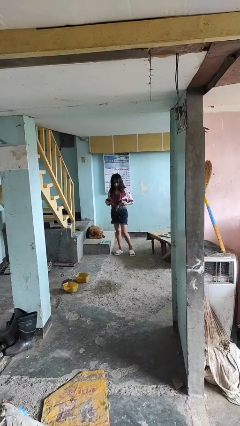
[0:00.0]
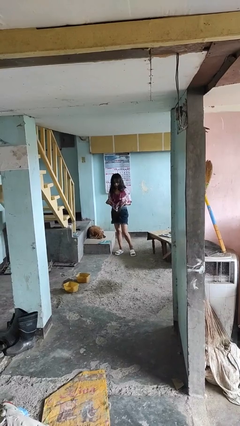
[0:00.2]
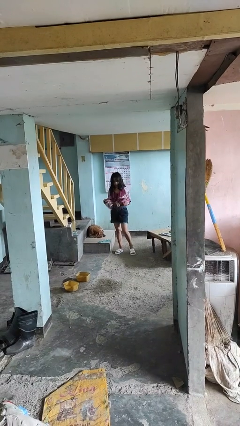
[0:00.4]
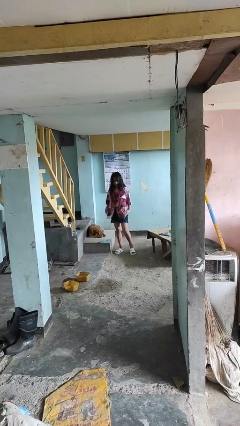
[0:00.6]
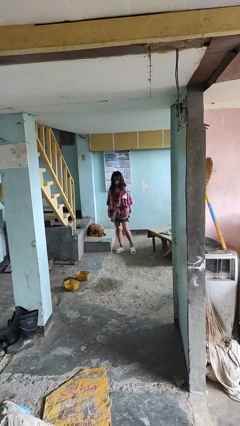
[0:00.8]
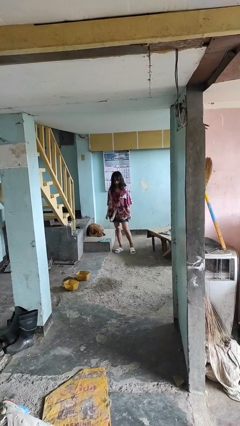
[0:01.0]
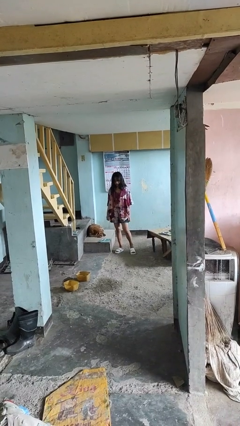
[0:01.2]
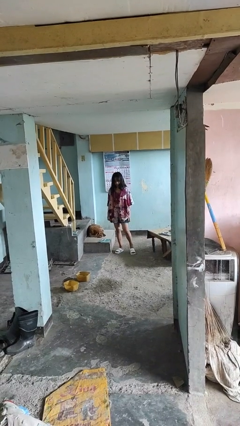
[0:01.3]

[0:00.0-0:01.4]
person untucks shirt

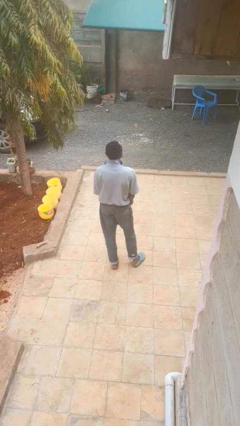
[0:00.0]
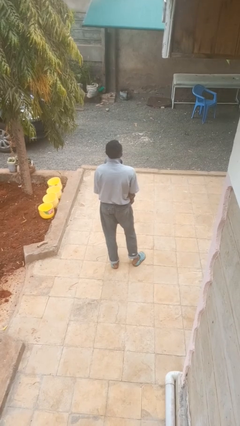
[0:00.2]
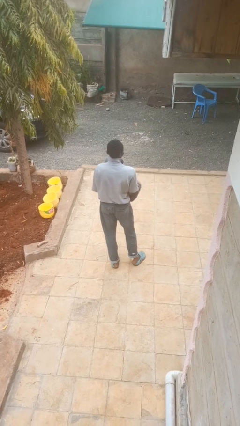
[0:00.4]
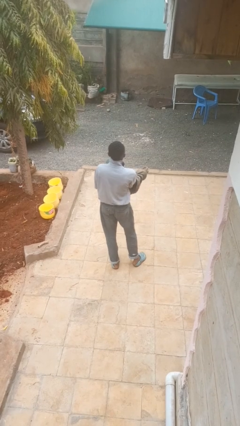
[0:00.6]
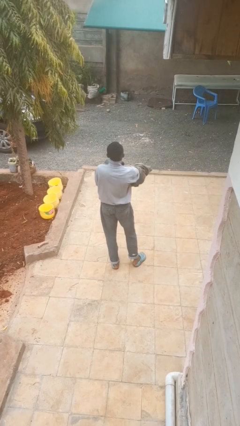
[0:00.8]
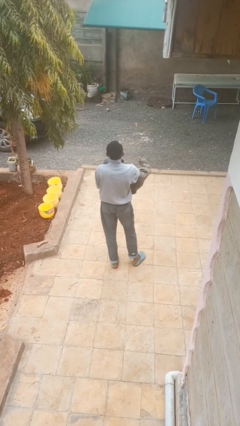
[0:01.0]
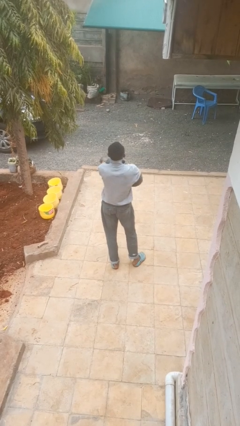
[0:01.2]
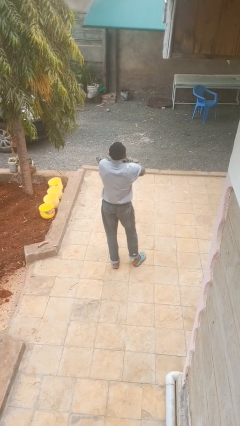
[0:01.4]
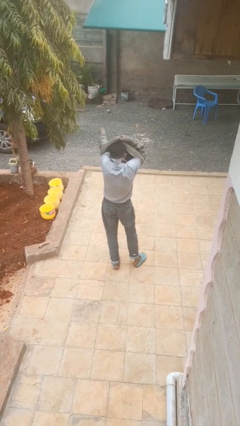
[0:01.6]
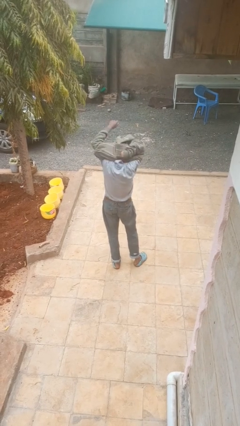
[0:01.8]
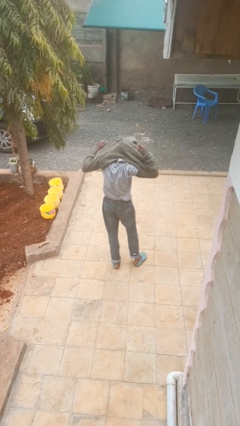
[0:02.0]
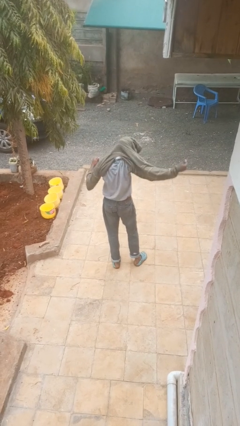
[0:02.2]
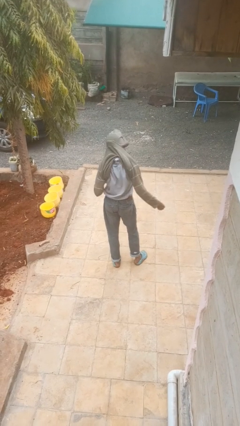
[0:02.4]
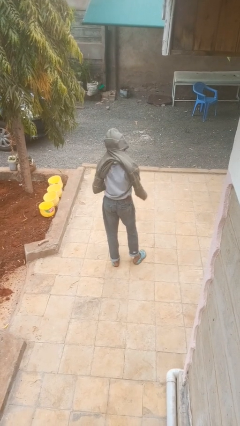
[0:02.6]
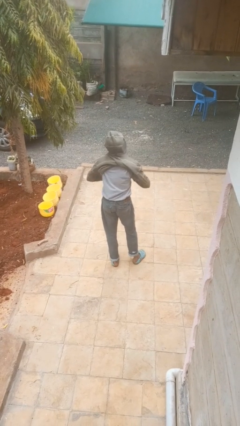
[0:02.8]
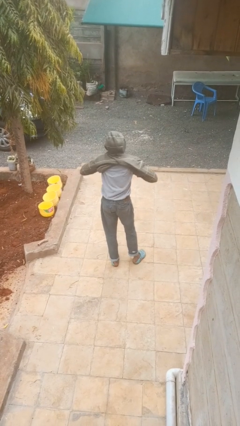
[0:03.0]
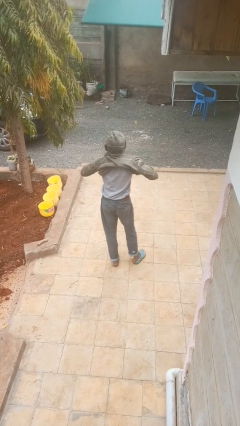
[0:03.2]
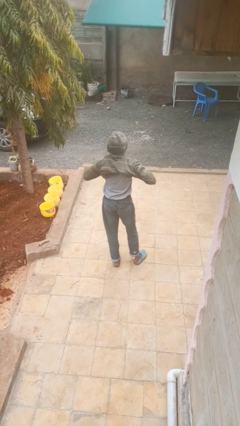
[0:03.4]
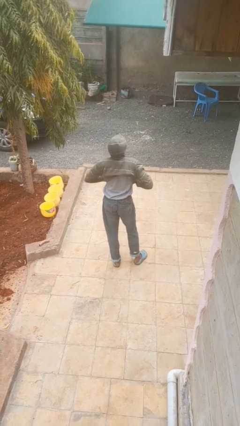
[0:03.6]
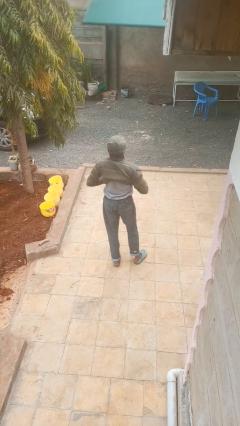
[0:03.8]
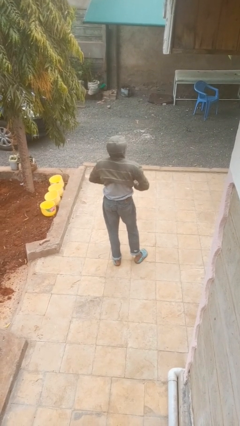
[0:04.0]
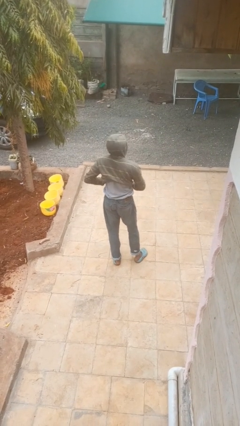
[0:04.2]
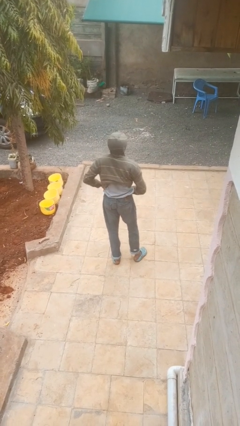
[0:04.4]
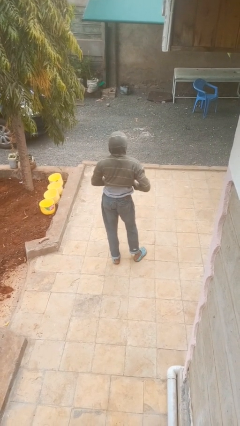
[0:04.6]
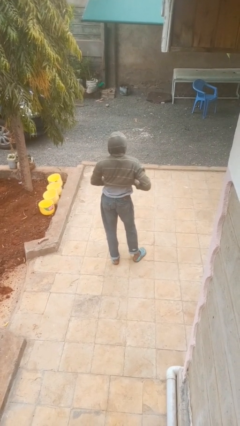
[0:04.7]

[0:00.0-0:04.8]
person puts on hoodie

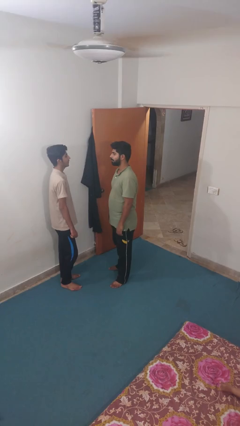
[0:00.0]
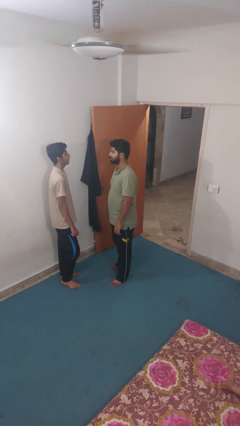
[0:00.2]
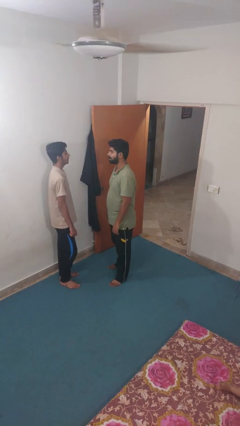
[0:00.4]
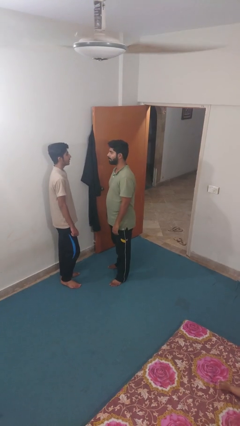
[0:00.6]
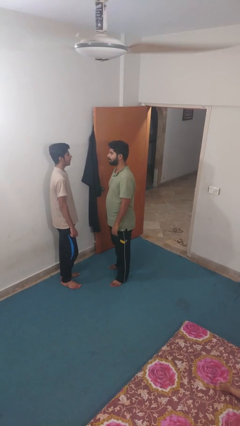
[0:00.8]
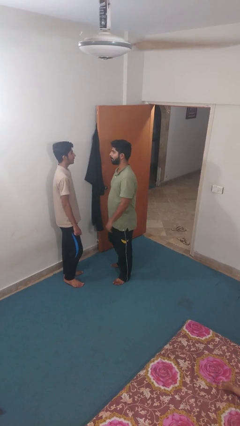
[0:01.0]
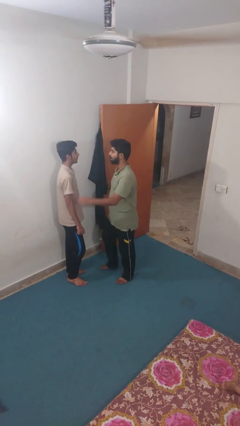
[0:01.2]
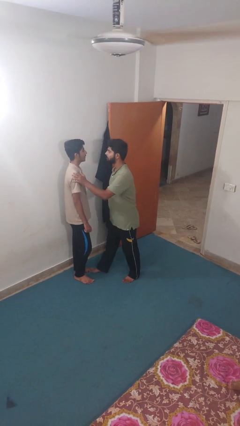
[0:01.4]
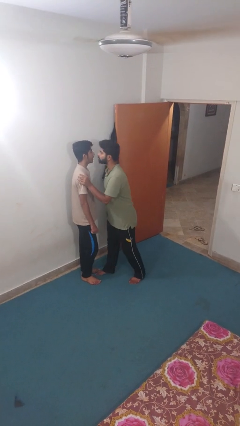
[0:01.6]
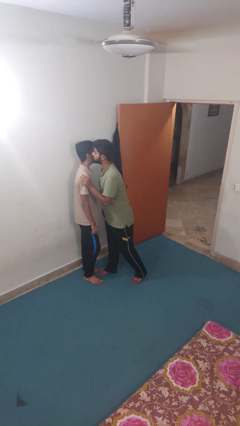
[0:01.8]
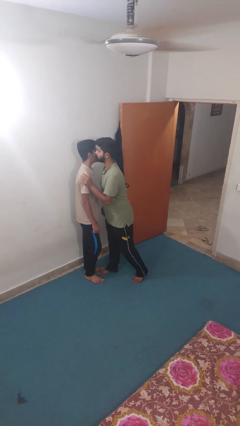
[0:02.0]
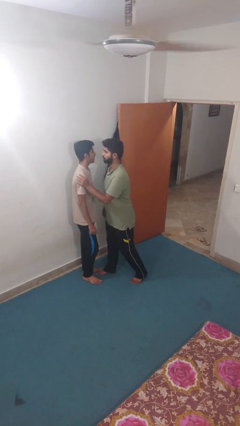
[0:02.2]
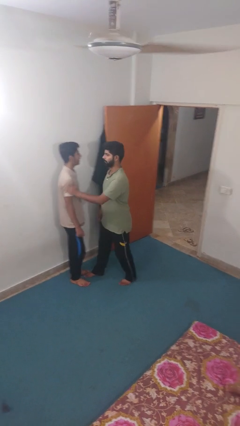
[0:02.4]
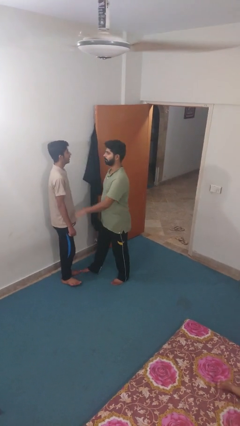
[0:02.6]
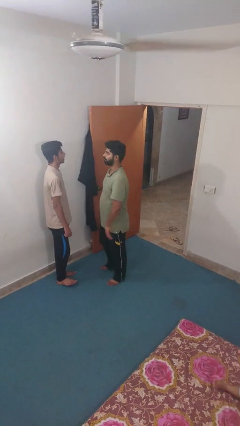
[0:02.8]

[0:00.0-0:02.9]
person kisses cheek of person

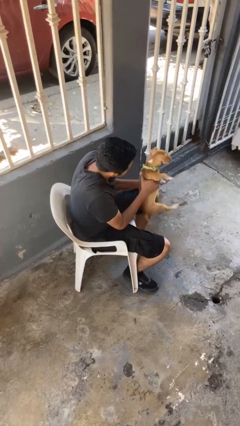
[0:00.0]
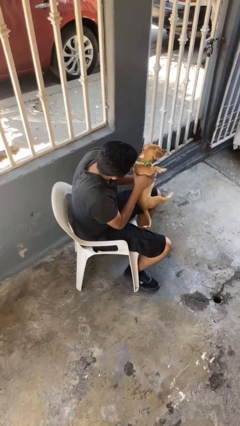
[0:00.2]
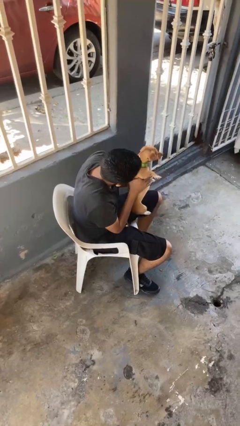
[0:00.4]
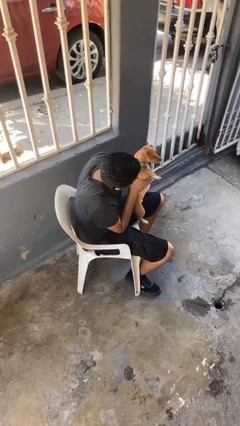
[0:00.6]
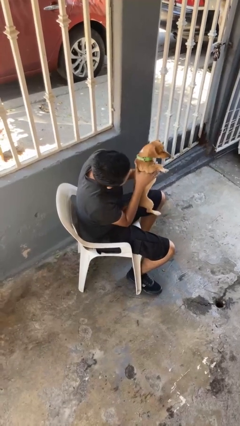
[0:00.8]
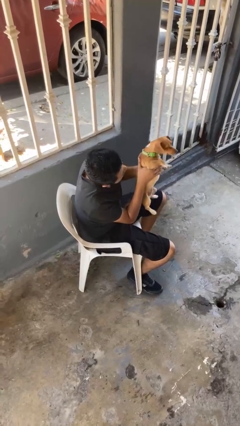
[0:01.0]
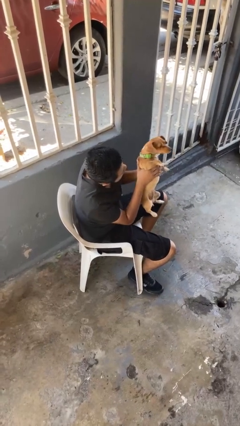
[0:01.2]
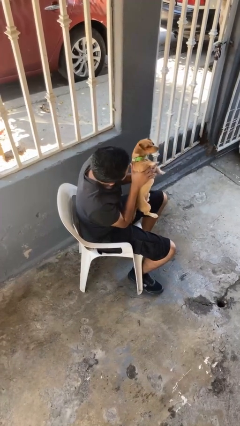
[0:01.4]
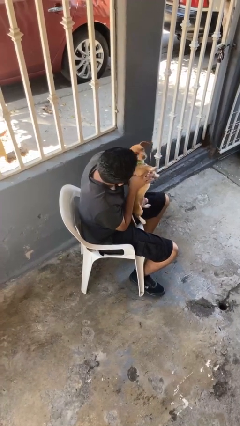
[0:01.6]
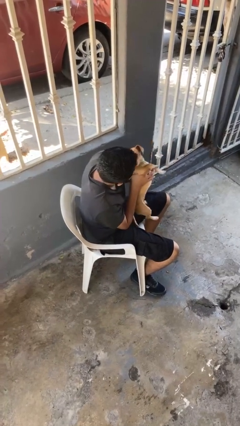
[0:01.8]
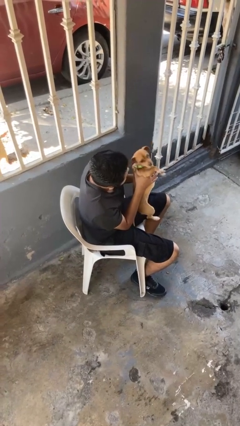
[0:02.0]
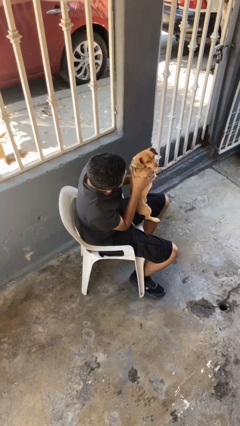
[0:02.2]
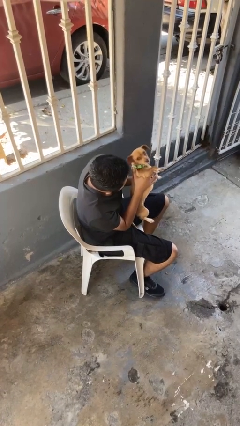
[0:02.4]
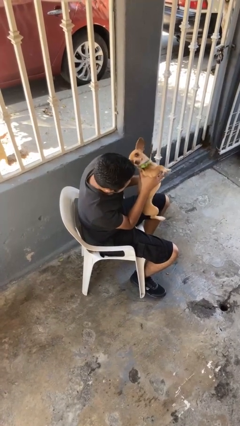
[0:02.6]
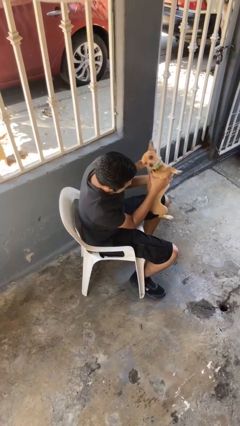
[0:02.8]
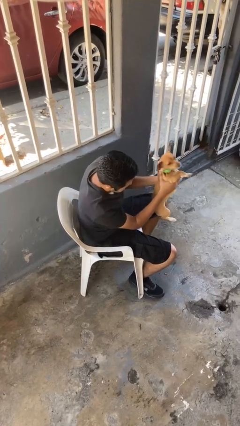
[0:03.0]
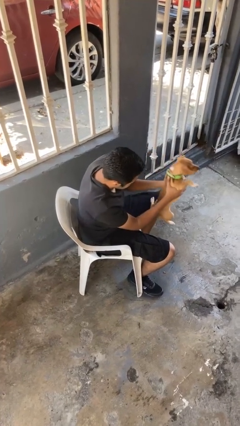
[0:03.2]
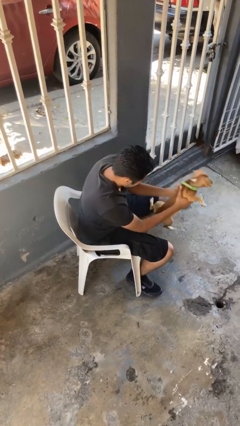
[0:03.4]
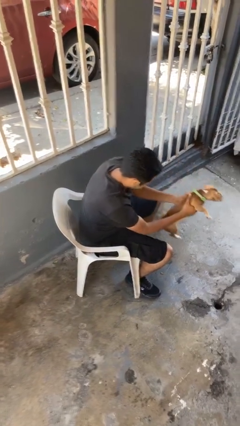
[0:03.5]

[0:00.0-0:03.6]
person hugs dog

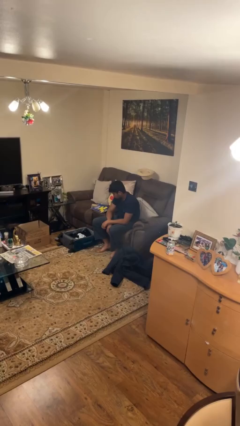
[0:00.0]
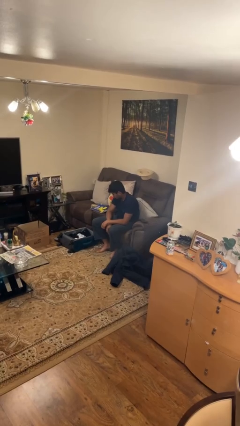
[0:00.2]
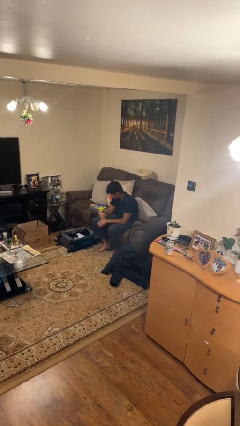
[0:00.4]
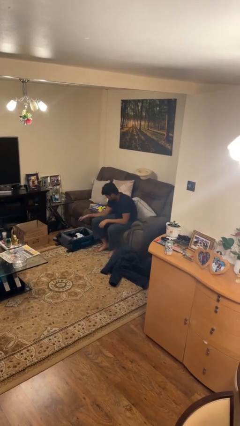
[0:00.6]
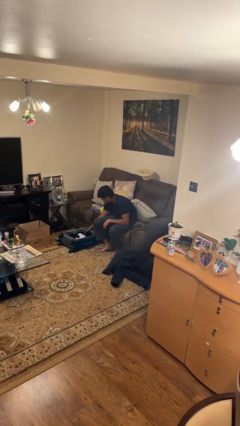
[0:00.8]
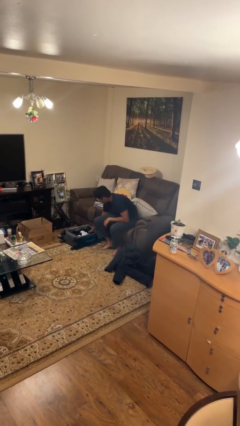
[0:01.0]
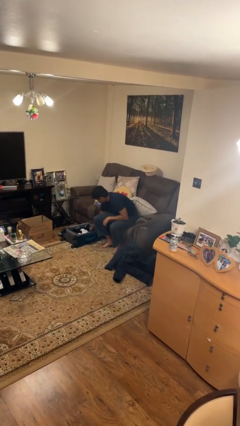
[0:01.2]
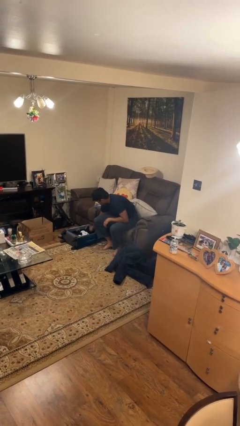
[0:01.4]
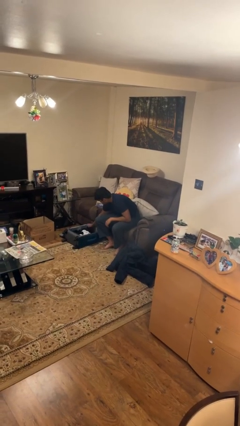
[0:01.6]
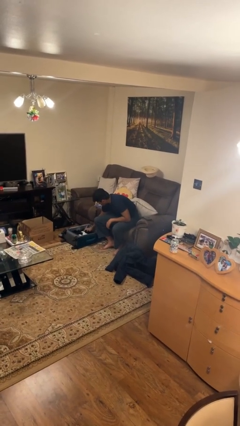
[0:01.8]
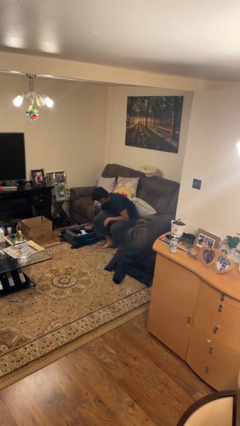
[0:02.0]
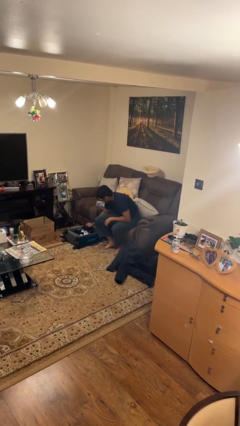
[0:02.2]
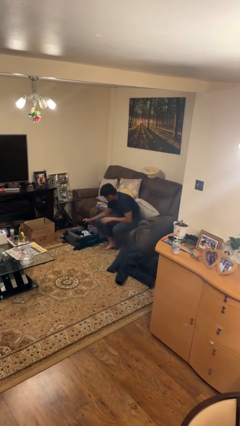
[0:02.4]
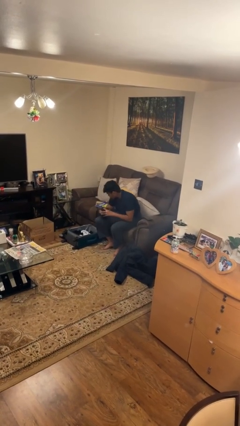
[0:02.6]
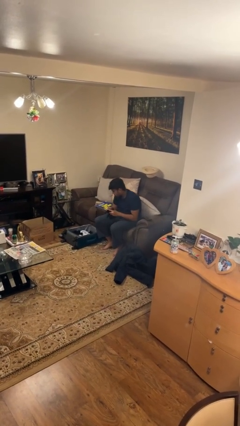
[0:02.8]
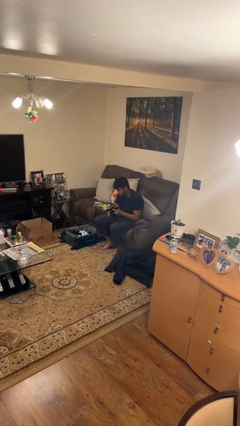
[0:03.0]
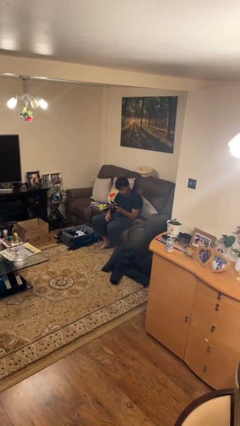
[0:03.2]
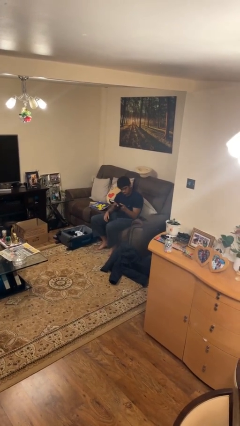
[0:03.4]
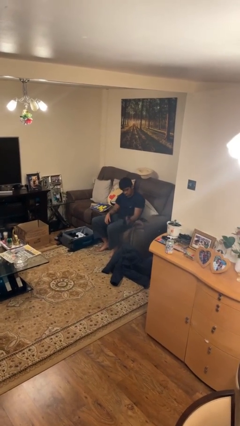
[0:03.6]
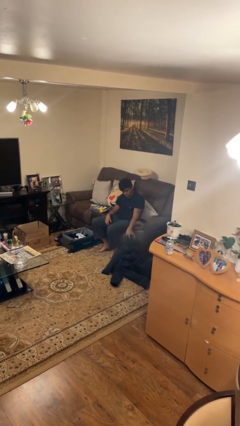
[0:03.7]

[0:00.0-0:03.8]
person unloads clothes from suitcase

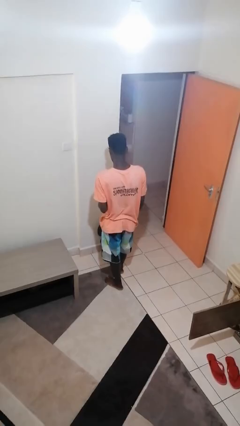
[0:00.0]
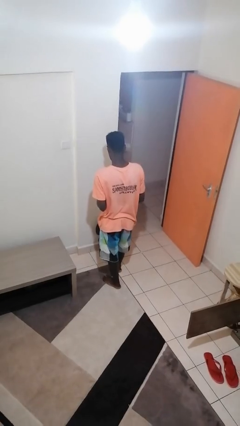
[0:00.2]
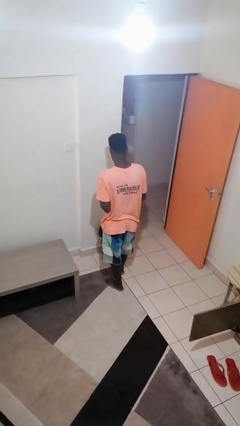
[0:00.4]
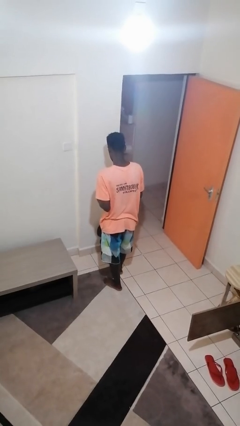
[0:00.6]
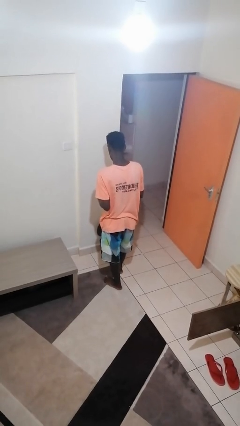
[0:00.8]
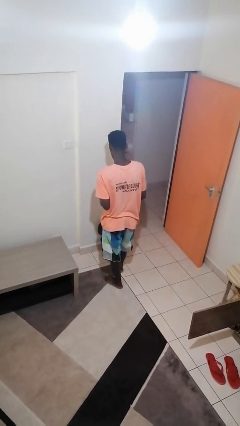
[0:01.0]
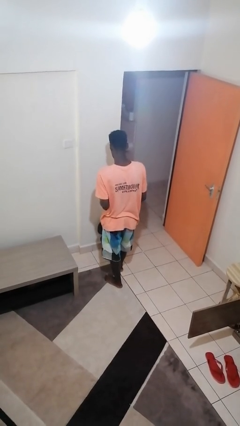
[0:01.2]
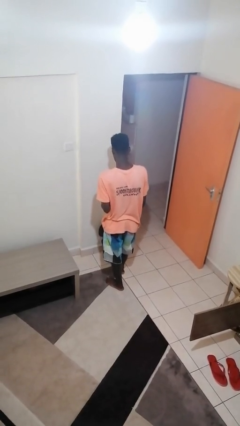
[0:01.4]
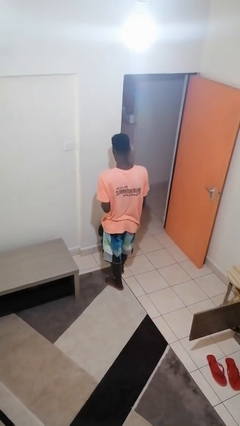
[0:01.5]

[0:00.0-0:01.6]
person discards trash
